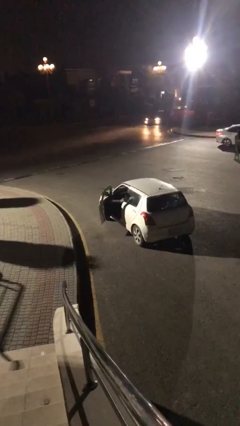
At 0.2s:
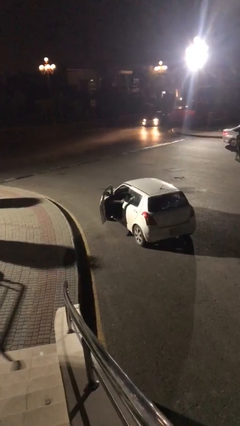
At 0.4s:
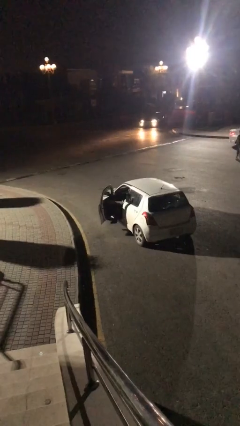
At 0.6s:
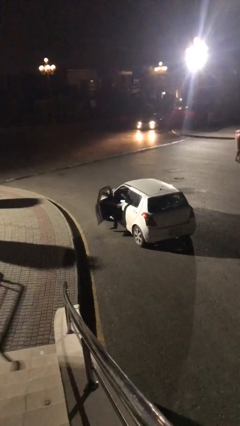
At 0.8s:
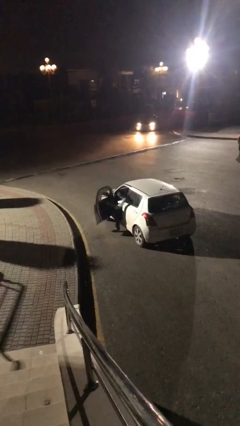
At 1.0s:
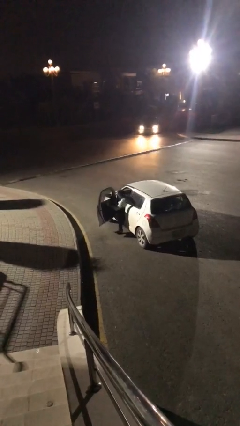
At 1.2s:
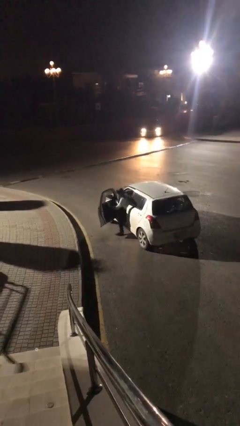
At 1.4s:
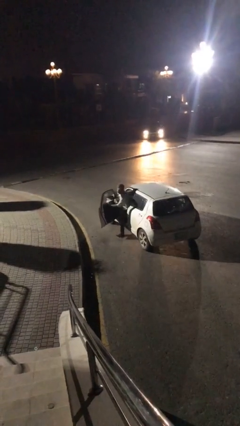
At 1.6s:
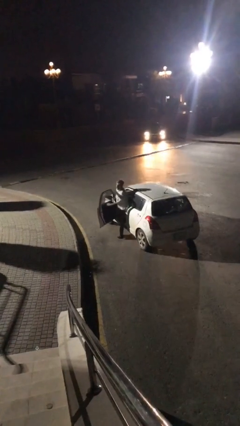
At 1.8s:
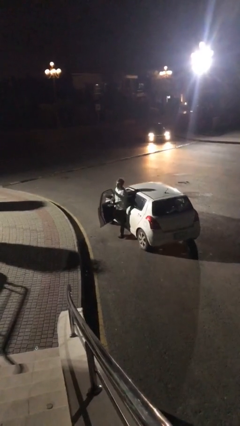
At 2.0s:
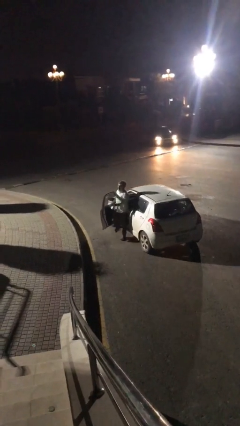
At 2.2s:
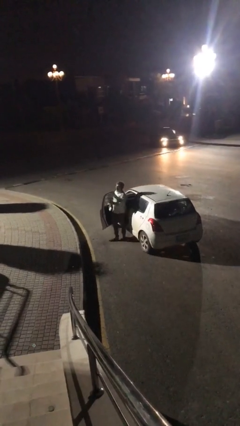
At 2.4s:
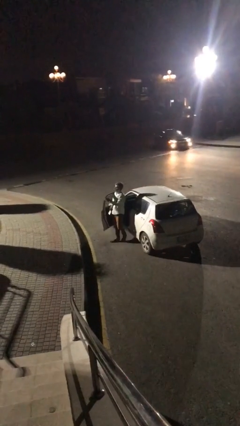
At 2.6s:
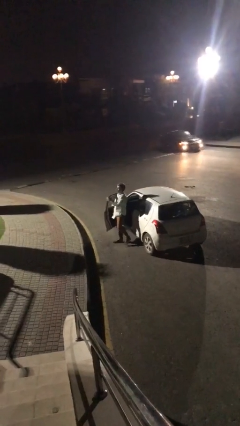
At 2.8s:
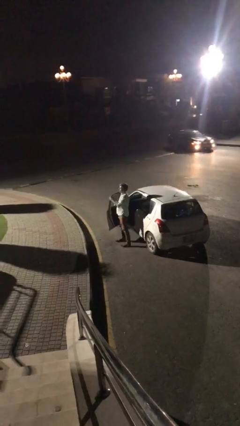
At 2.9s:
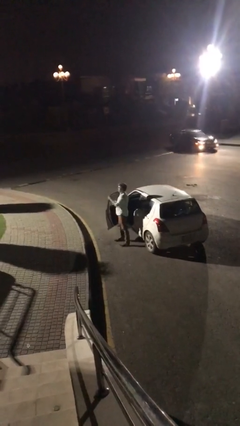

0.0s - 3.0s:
person exits car

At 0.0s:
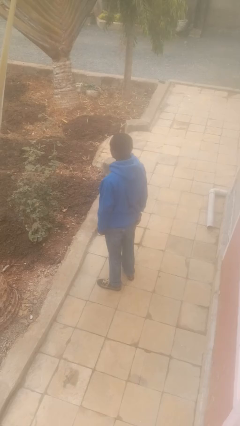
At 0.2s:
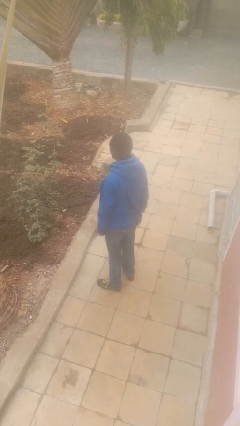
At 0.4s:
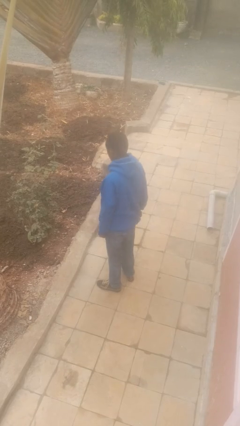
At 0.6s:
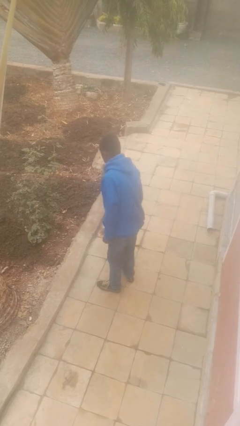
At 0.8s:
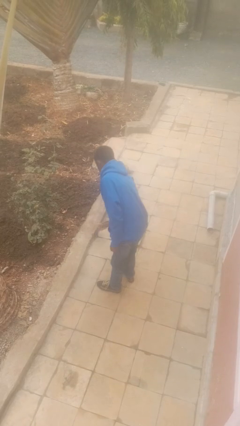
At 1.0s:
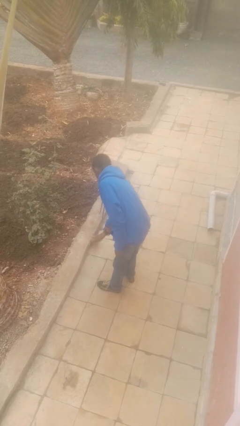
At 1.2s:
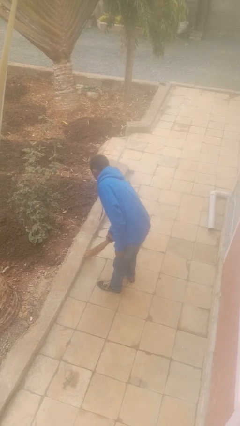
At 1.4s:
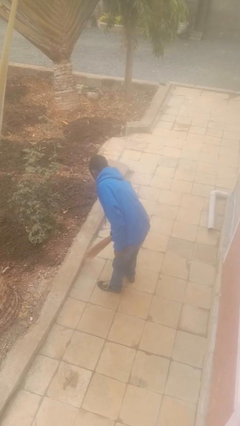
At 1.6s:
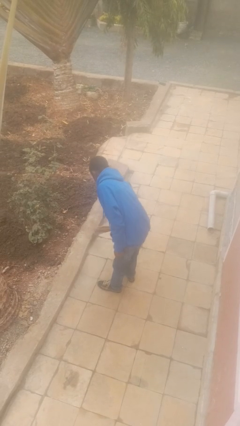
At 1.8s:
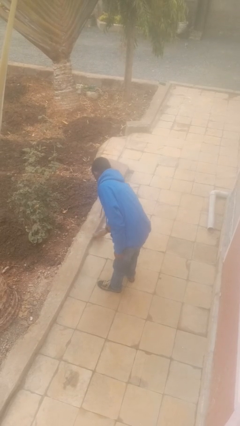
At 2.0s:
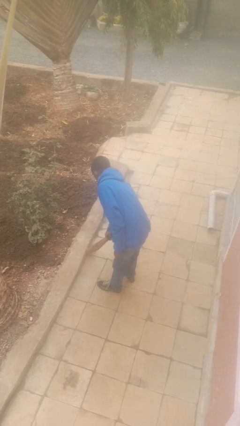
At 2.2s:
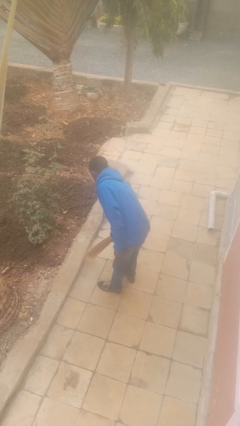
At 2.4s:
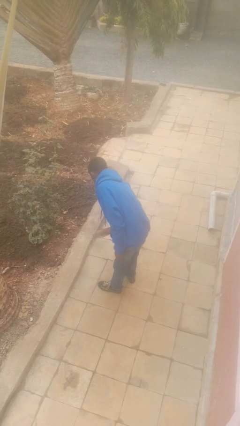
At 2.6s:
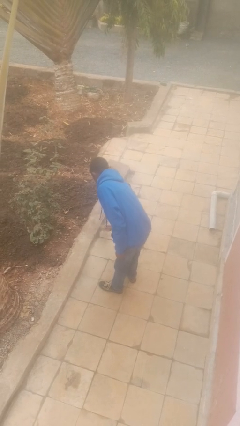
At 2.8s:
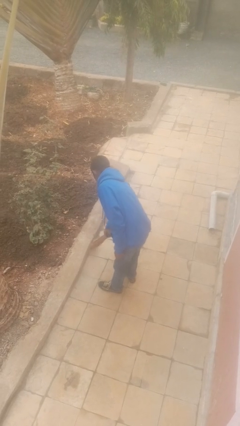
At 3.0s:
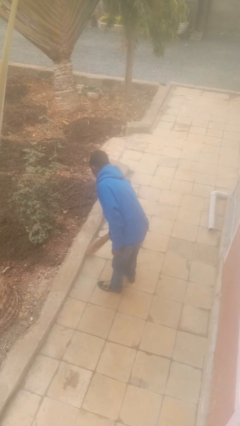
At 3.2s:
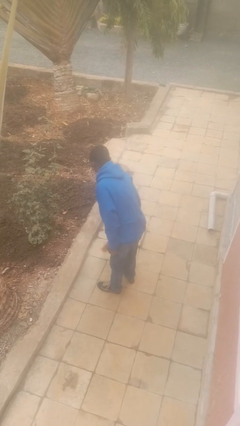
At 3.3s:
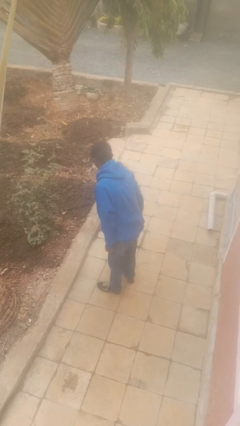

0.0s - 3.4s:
person sweeps floor

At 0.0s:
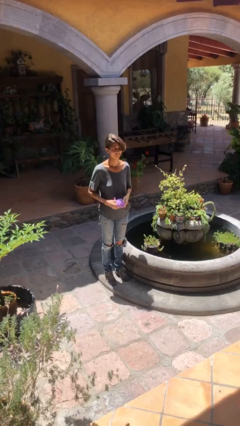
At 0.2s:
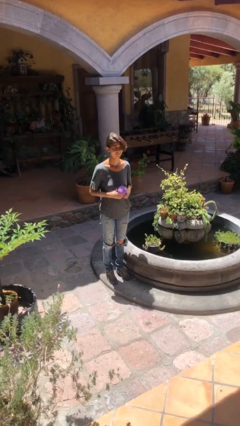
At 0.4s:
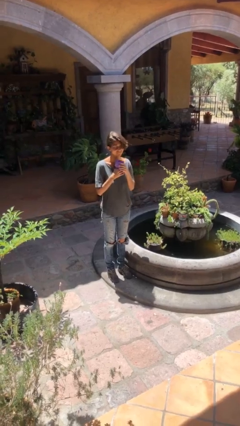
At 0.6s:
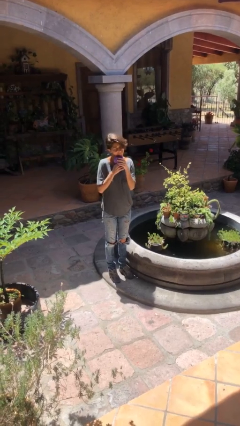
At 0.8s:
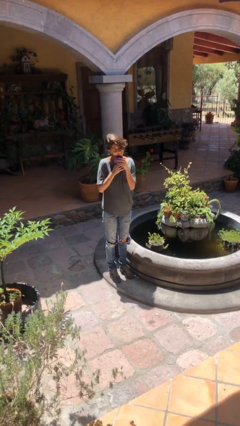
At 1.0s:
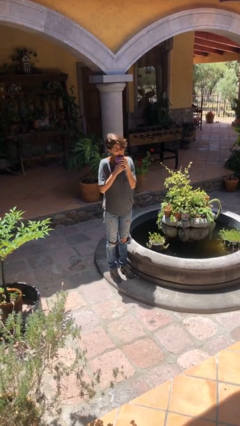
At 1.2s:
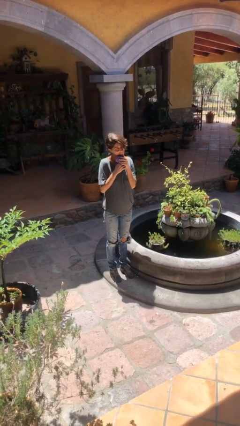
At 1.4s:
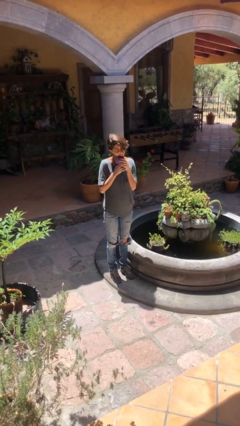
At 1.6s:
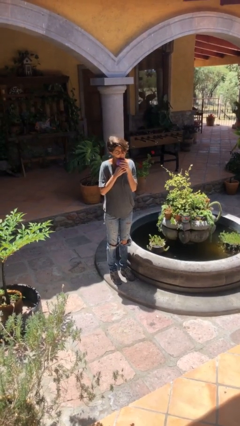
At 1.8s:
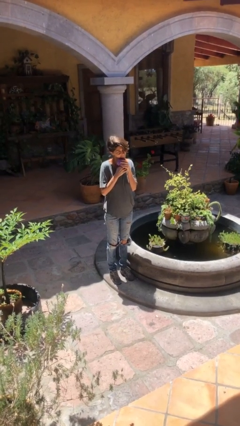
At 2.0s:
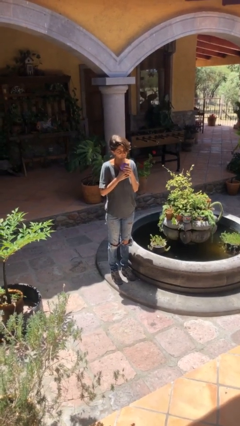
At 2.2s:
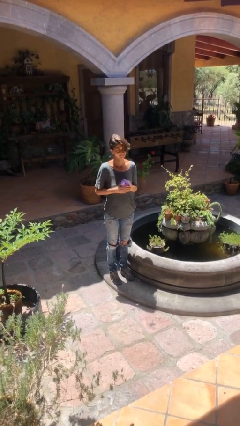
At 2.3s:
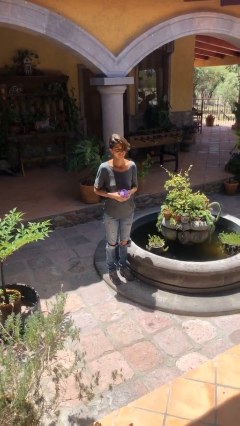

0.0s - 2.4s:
person hugs stuffed animal

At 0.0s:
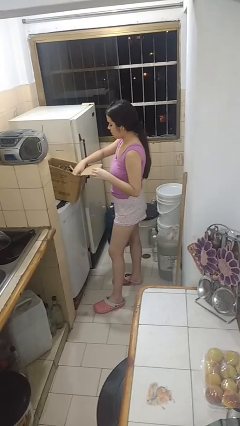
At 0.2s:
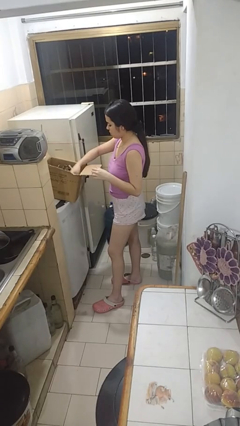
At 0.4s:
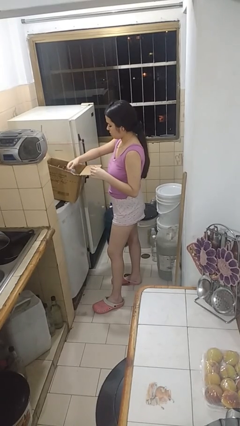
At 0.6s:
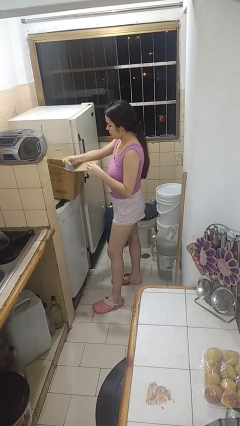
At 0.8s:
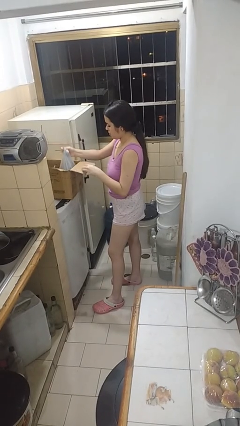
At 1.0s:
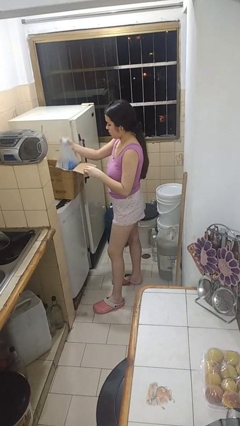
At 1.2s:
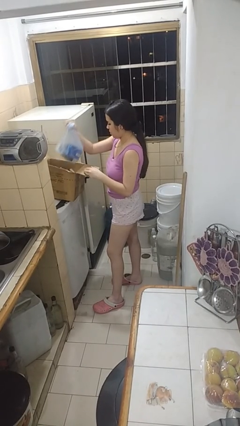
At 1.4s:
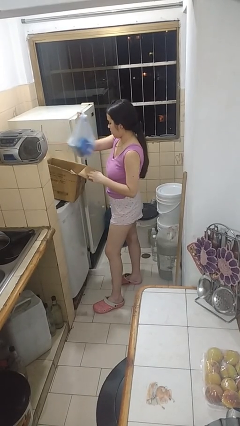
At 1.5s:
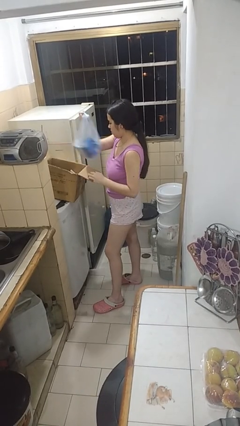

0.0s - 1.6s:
person takes object from box

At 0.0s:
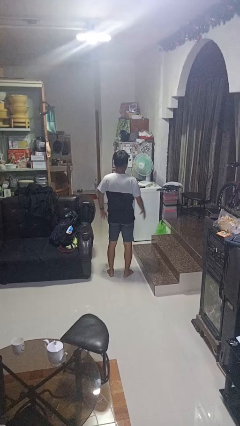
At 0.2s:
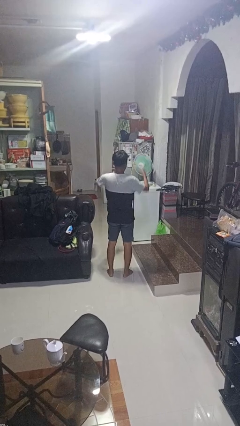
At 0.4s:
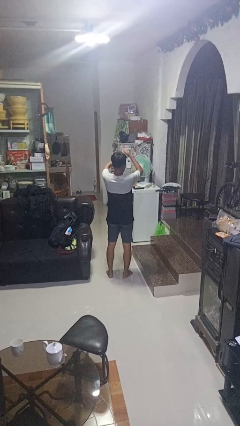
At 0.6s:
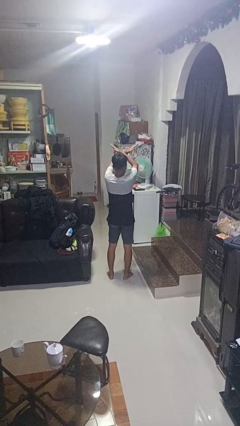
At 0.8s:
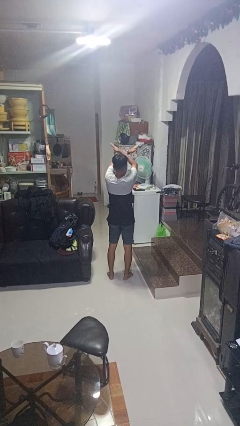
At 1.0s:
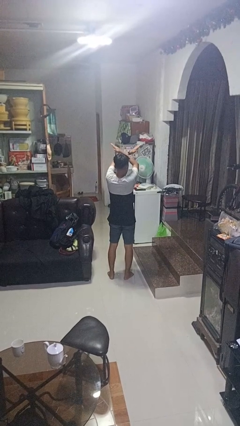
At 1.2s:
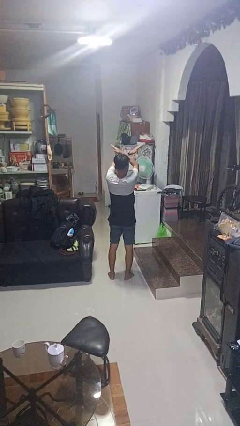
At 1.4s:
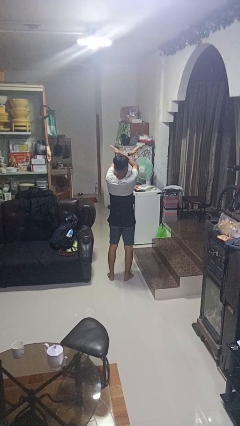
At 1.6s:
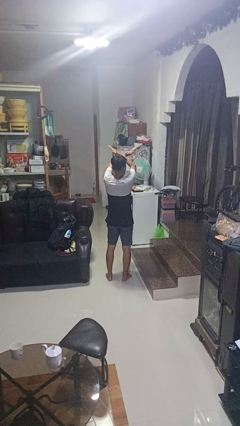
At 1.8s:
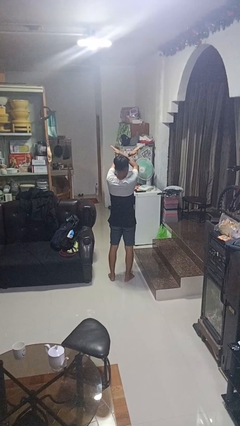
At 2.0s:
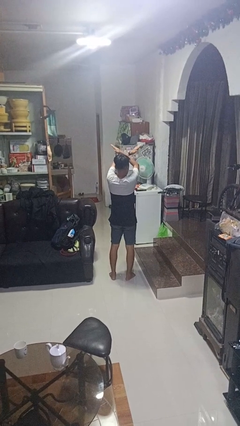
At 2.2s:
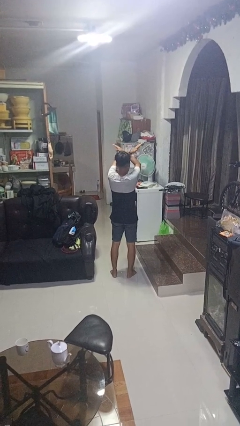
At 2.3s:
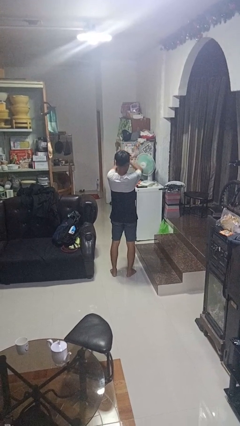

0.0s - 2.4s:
person gestures arms x

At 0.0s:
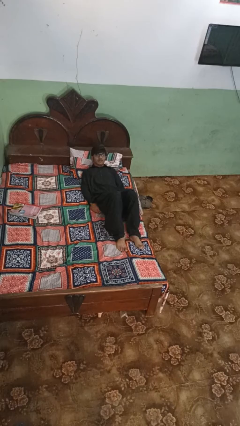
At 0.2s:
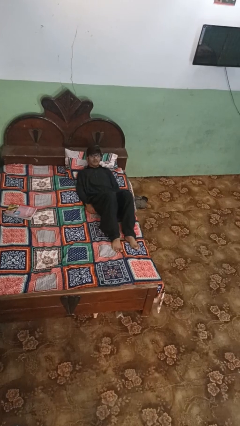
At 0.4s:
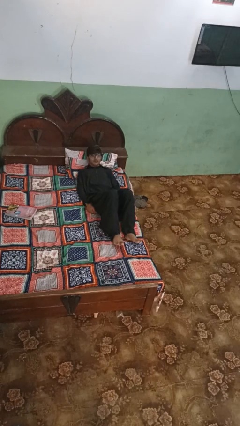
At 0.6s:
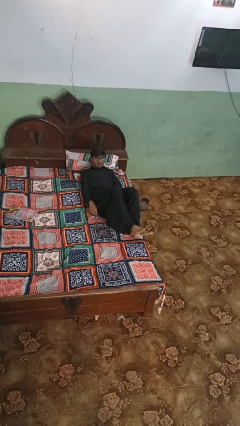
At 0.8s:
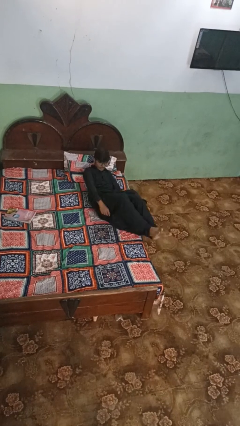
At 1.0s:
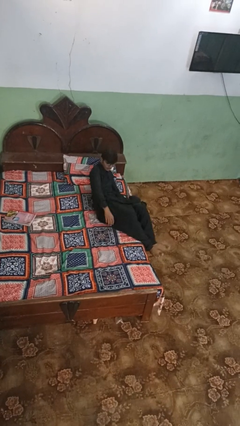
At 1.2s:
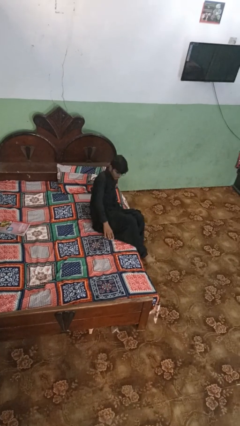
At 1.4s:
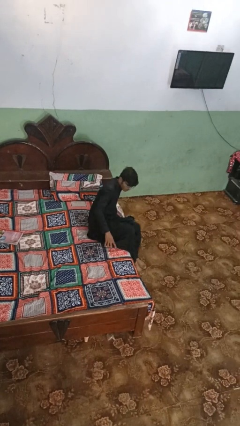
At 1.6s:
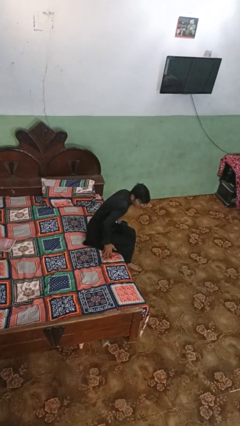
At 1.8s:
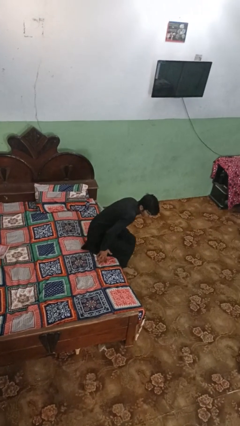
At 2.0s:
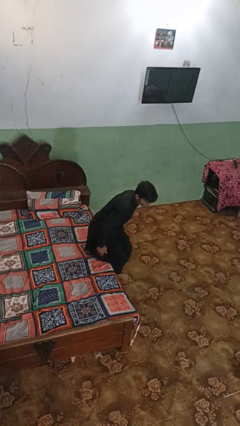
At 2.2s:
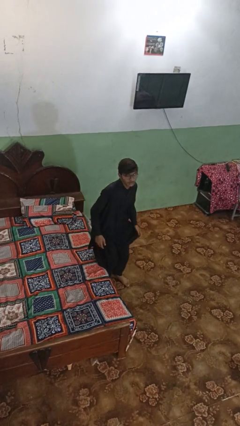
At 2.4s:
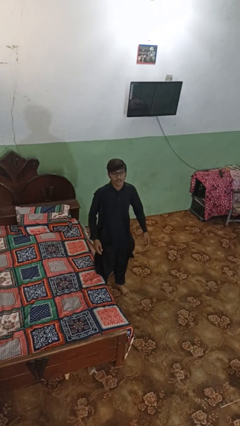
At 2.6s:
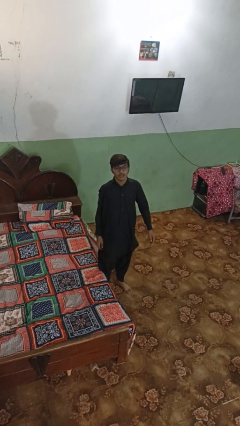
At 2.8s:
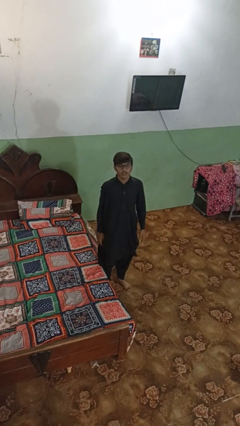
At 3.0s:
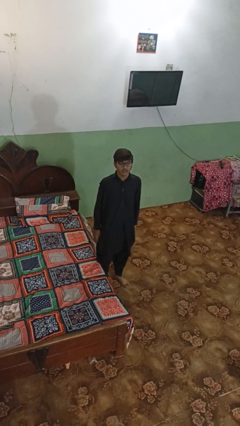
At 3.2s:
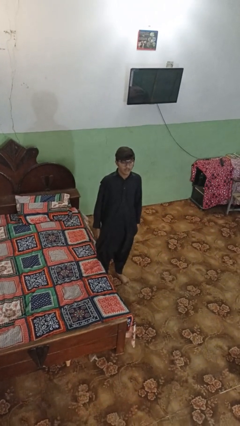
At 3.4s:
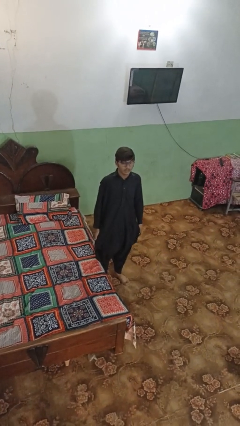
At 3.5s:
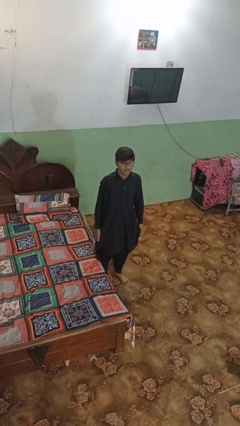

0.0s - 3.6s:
person stands up

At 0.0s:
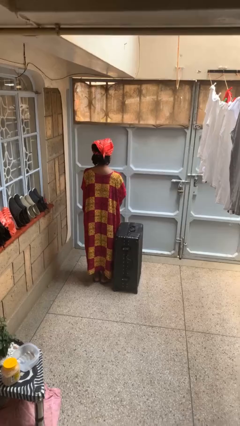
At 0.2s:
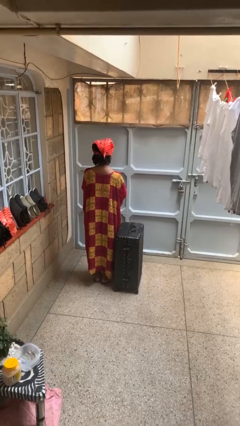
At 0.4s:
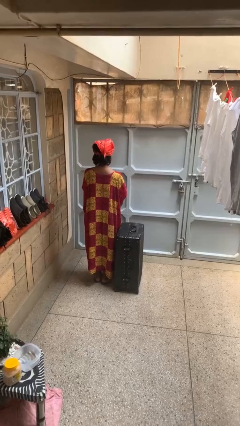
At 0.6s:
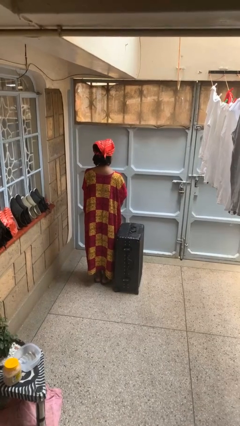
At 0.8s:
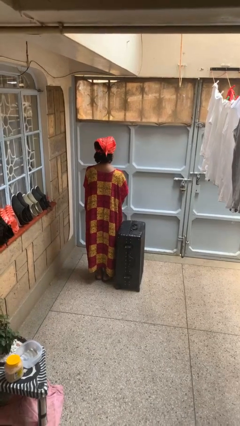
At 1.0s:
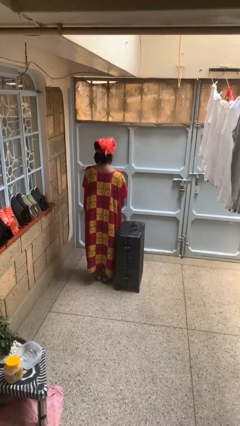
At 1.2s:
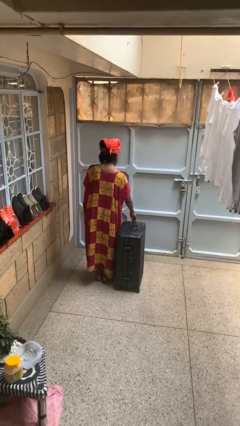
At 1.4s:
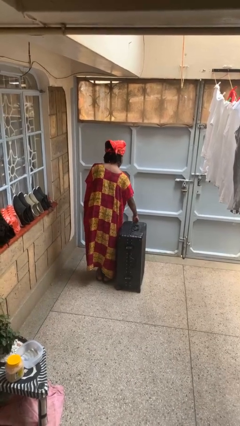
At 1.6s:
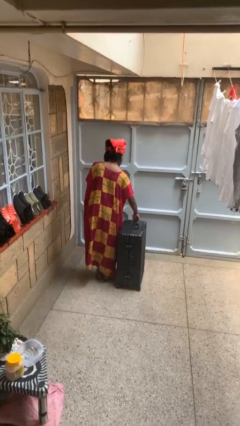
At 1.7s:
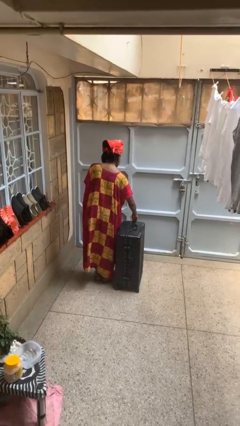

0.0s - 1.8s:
person opens suitcase
